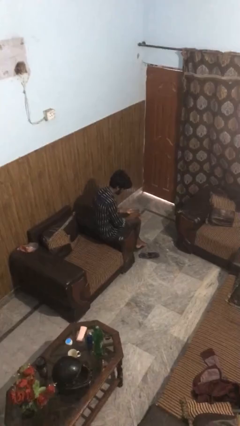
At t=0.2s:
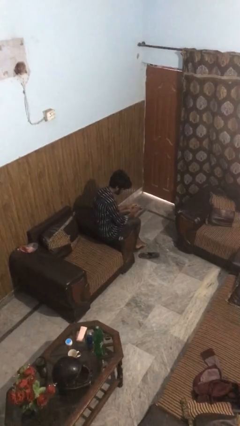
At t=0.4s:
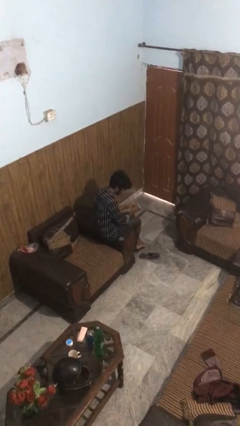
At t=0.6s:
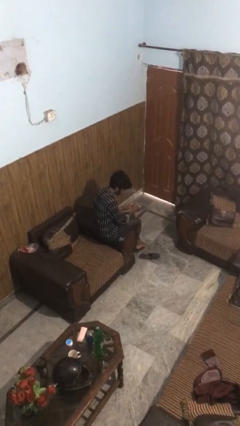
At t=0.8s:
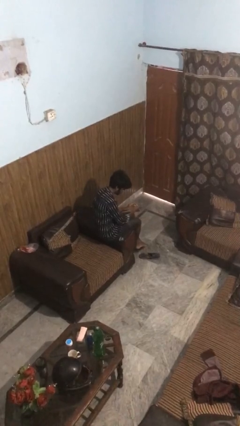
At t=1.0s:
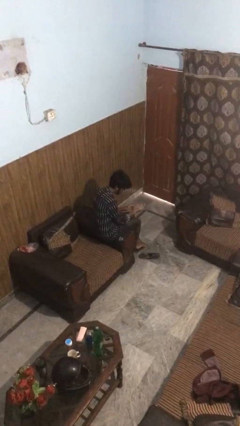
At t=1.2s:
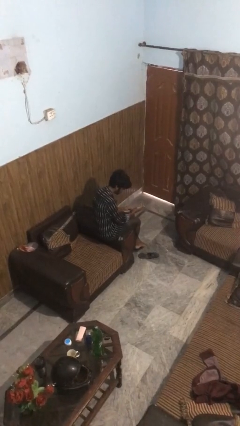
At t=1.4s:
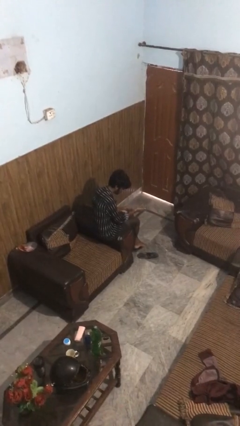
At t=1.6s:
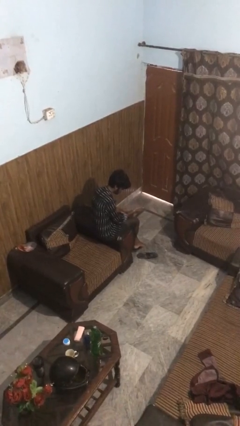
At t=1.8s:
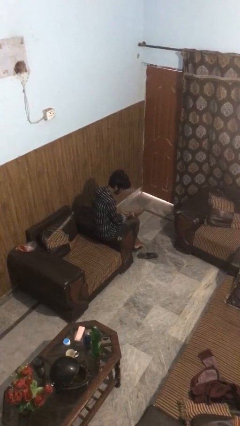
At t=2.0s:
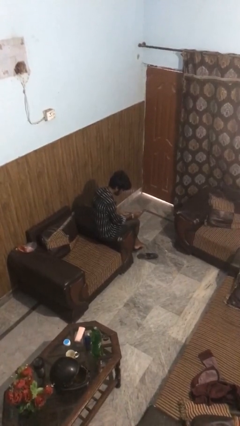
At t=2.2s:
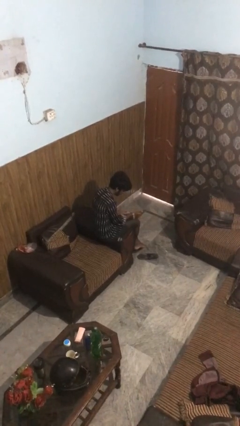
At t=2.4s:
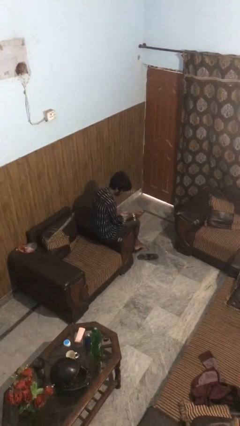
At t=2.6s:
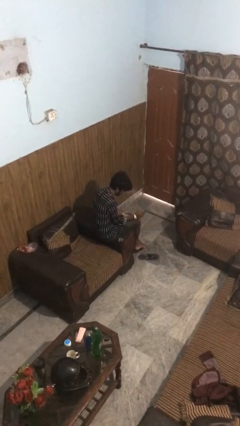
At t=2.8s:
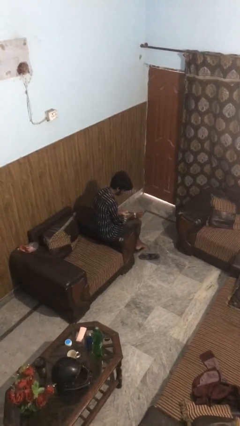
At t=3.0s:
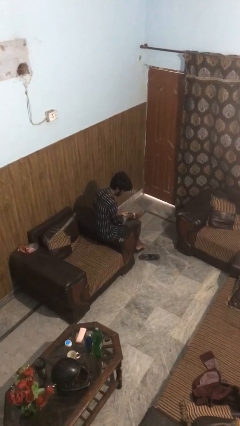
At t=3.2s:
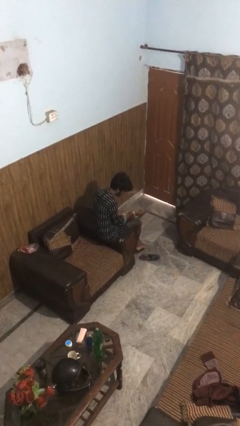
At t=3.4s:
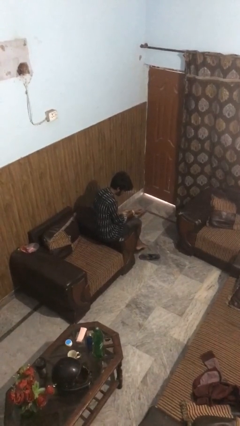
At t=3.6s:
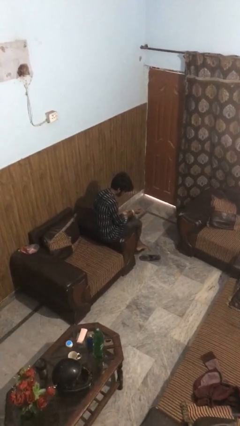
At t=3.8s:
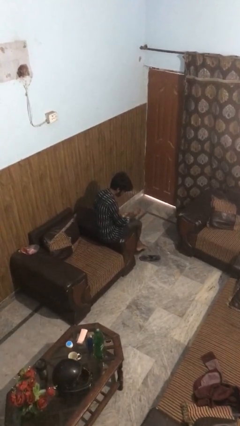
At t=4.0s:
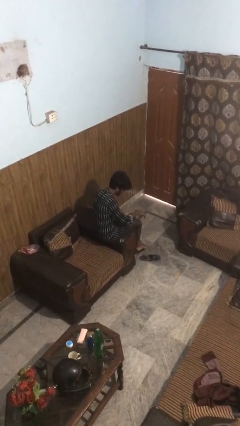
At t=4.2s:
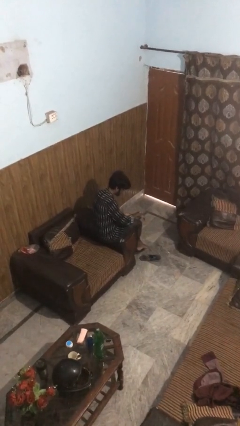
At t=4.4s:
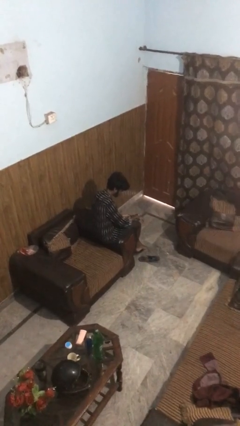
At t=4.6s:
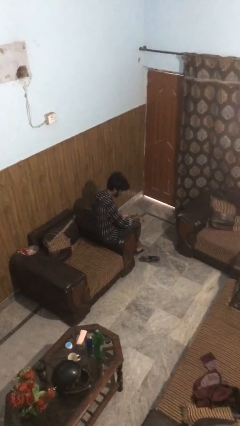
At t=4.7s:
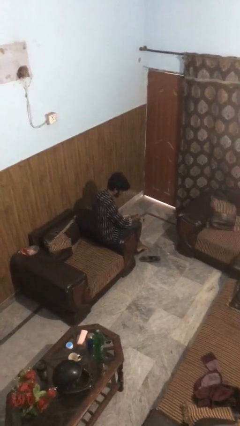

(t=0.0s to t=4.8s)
person puts on wristwatch

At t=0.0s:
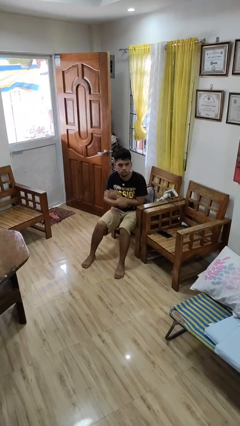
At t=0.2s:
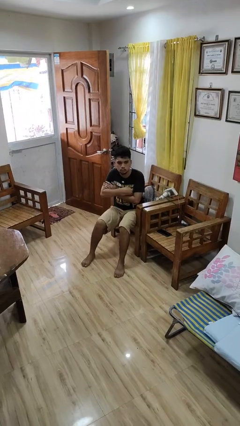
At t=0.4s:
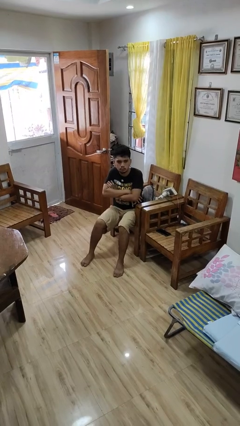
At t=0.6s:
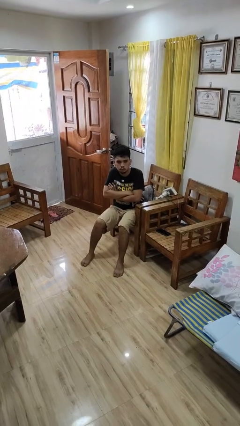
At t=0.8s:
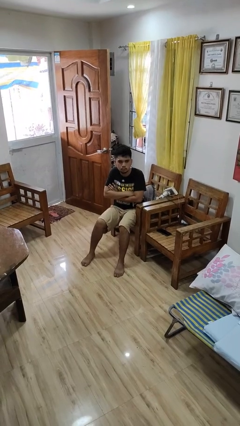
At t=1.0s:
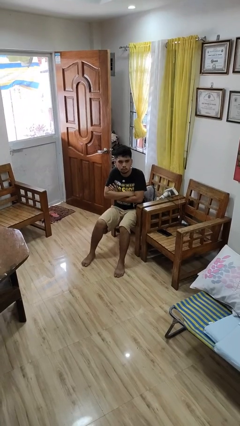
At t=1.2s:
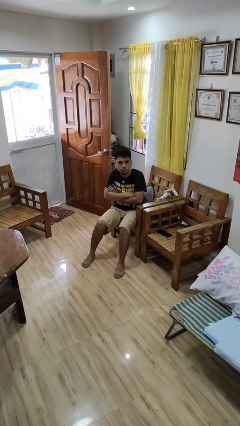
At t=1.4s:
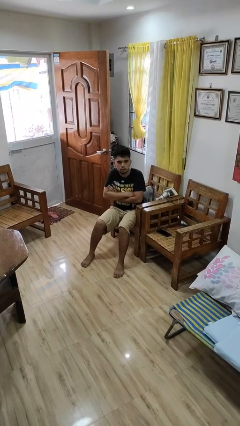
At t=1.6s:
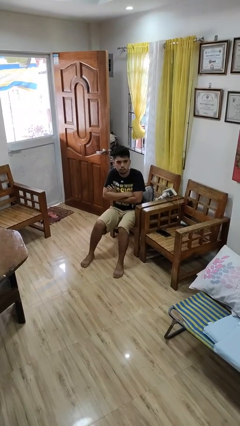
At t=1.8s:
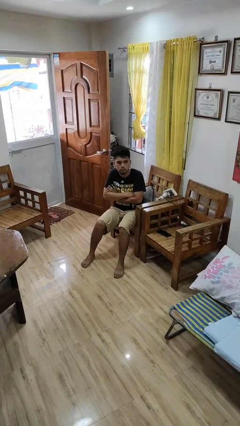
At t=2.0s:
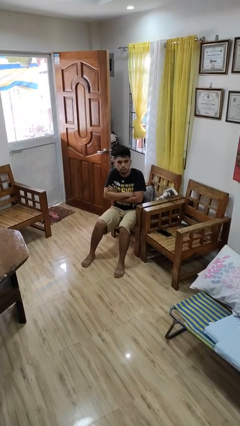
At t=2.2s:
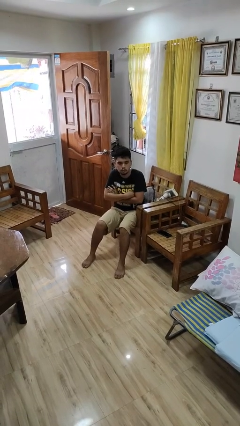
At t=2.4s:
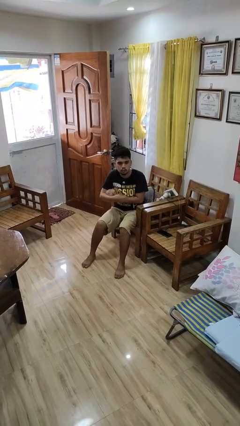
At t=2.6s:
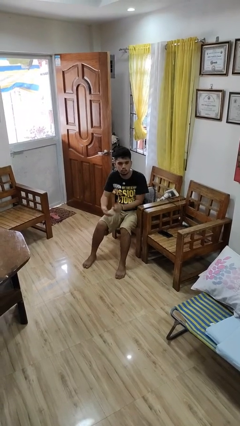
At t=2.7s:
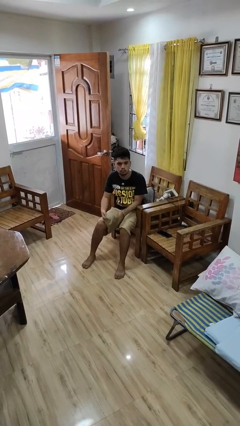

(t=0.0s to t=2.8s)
person crosses arms

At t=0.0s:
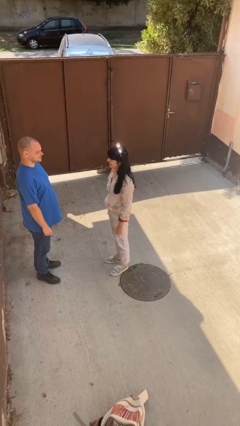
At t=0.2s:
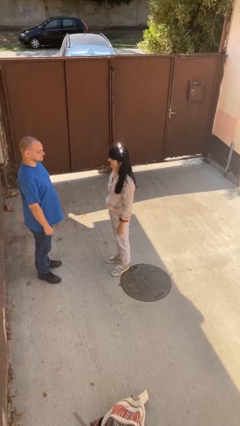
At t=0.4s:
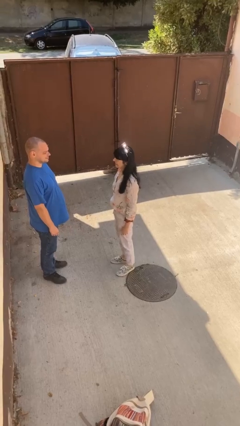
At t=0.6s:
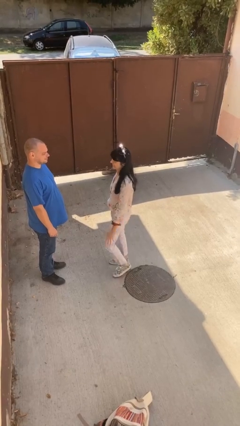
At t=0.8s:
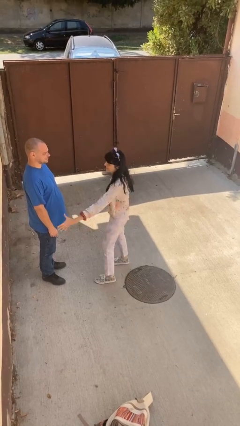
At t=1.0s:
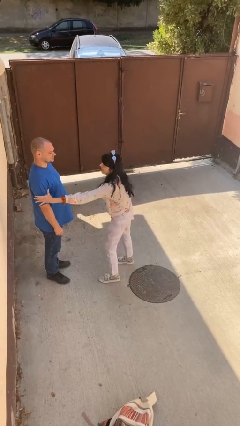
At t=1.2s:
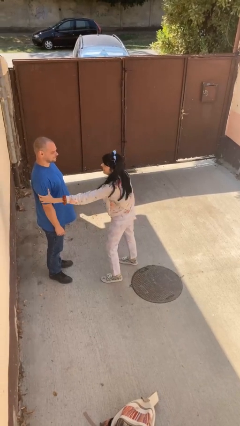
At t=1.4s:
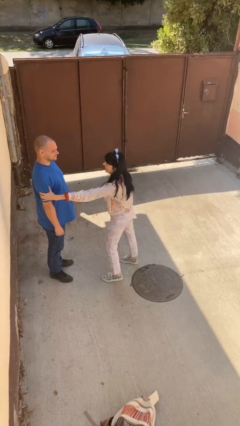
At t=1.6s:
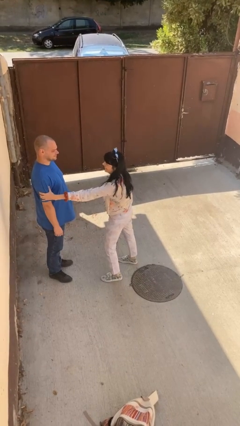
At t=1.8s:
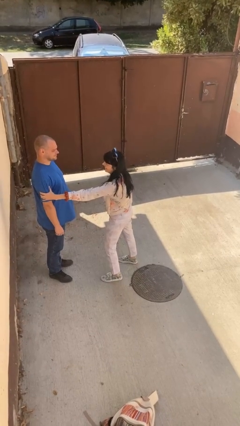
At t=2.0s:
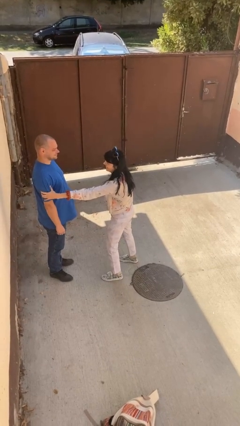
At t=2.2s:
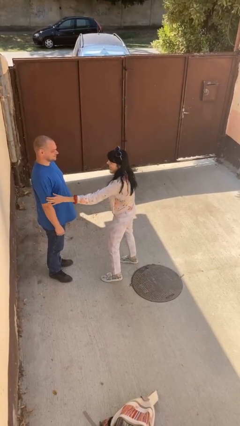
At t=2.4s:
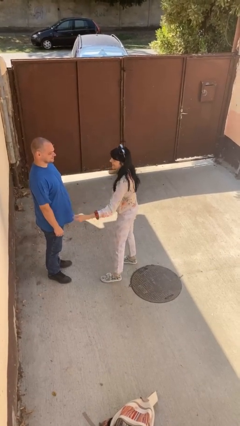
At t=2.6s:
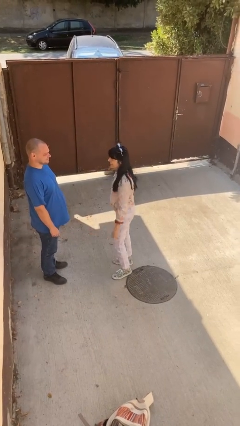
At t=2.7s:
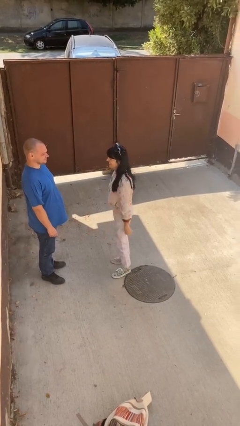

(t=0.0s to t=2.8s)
person grabs person by bicep

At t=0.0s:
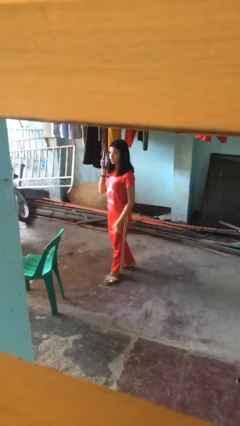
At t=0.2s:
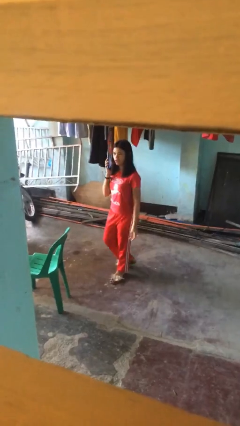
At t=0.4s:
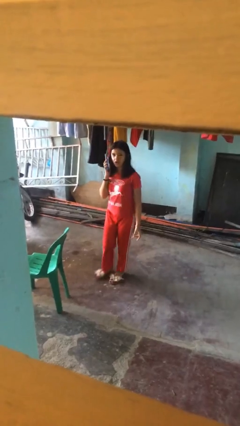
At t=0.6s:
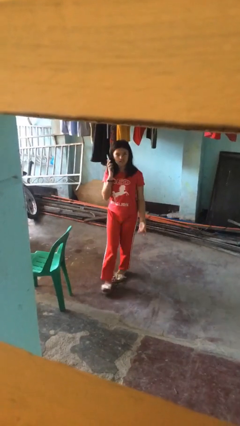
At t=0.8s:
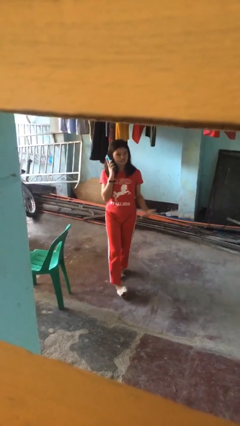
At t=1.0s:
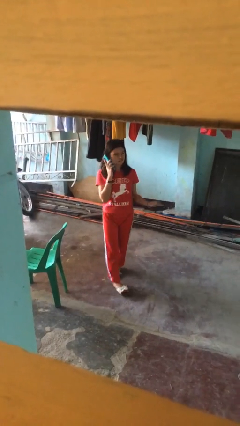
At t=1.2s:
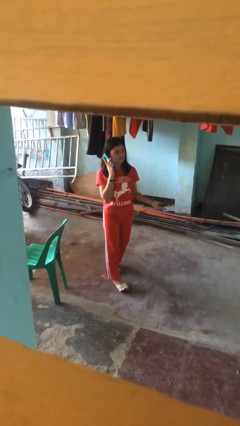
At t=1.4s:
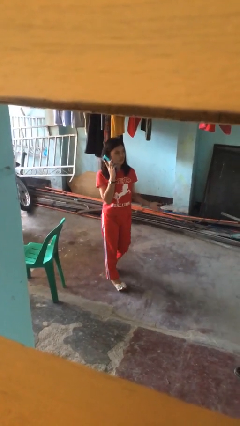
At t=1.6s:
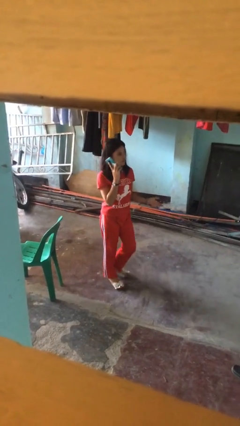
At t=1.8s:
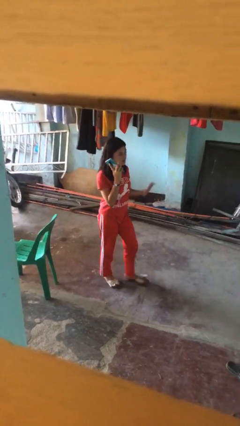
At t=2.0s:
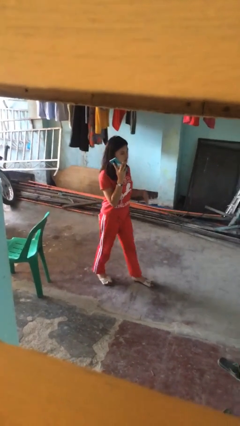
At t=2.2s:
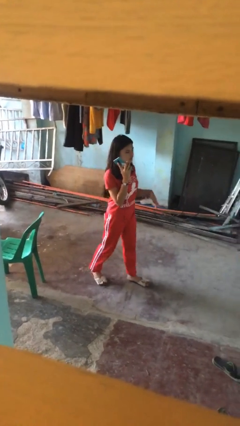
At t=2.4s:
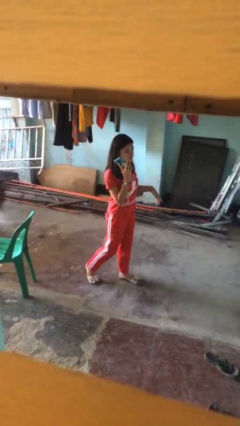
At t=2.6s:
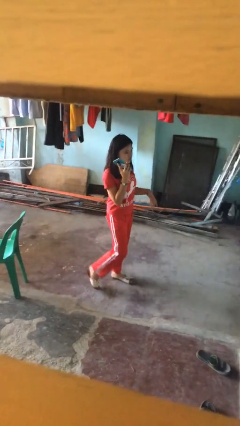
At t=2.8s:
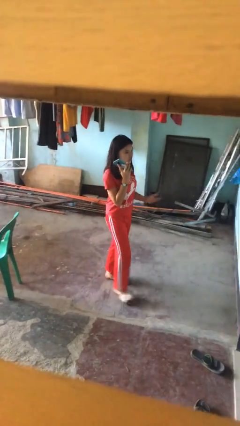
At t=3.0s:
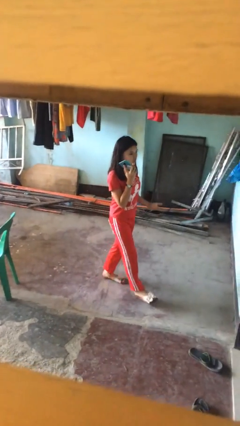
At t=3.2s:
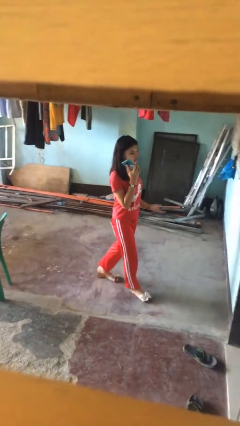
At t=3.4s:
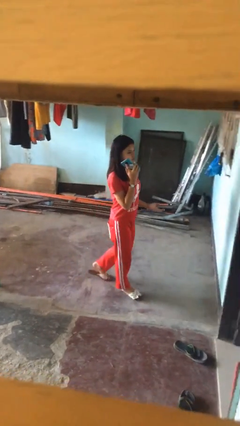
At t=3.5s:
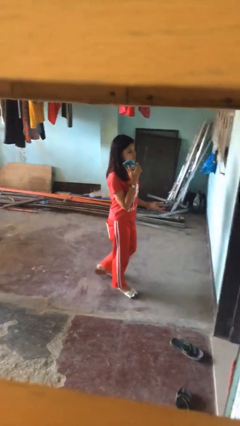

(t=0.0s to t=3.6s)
person talks on phone

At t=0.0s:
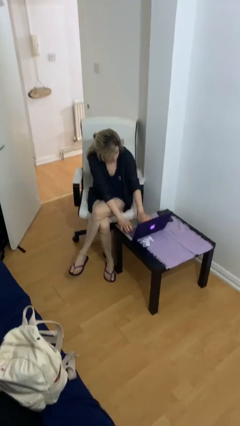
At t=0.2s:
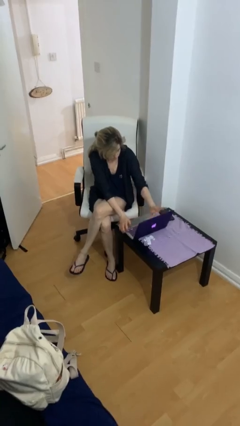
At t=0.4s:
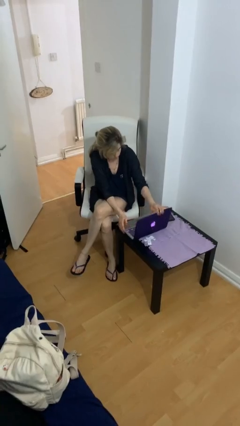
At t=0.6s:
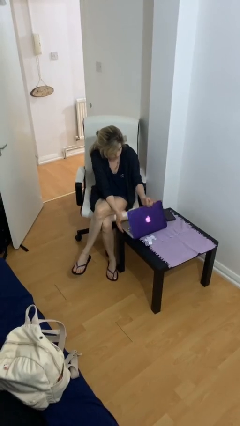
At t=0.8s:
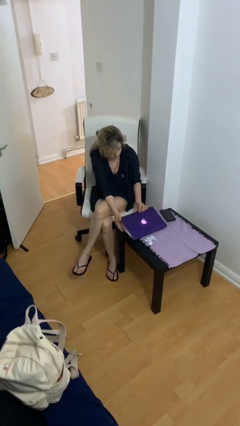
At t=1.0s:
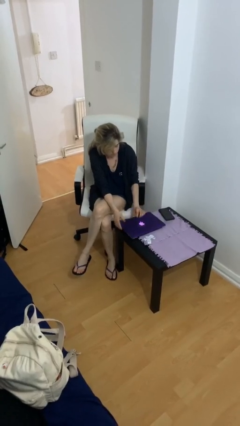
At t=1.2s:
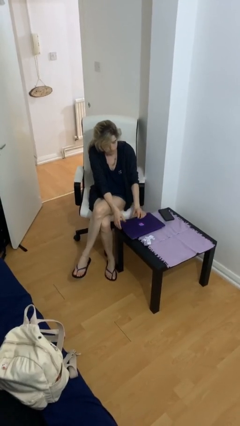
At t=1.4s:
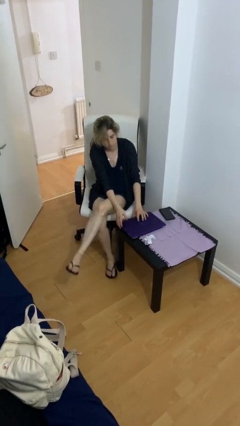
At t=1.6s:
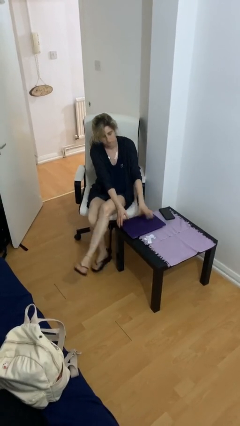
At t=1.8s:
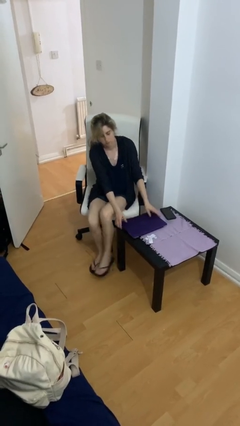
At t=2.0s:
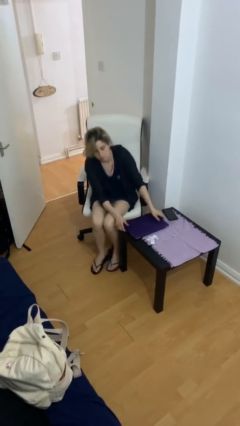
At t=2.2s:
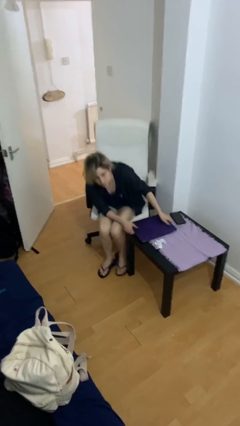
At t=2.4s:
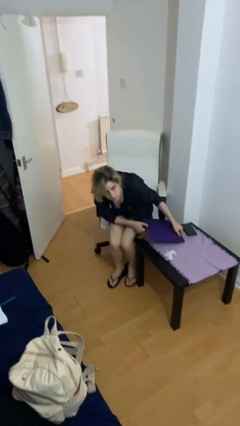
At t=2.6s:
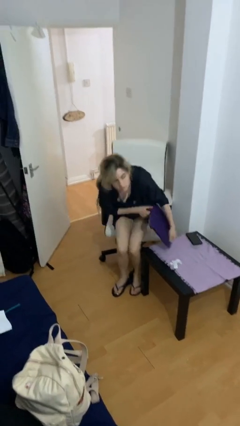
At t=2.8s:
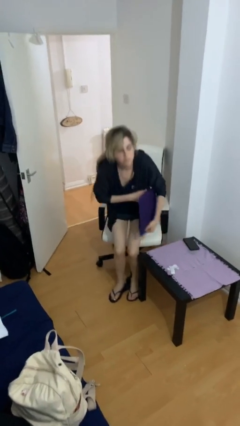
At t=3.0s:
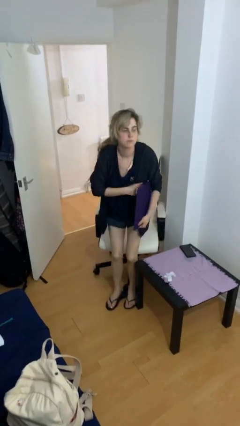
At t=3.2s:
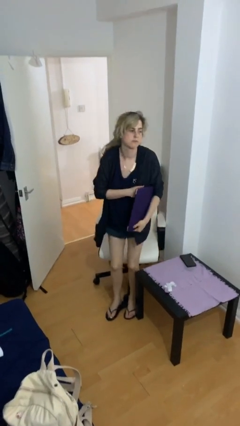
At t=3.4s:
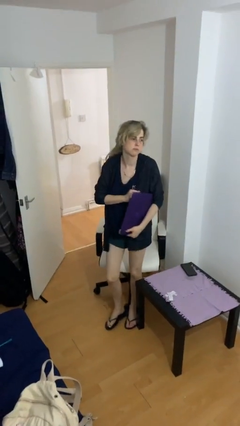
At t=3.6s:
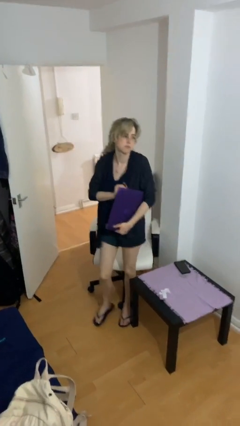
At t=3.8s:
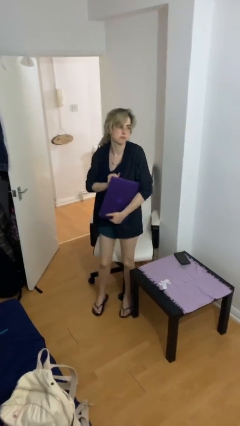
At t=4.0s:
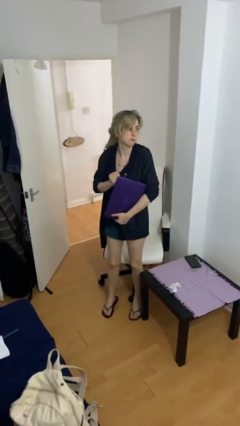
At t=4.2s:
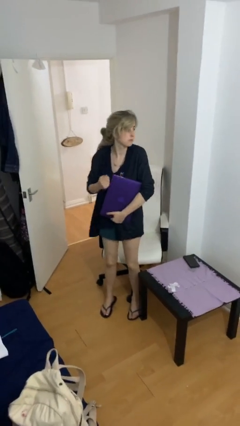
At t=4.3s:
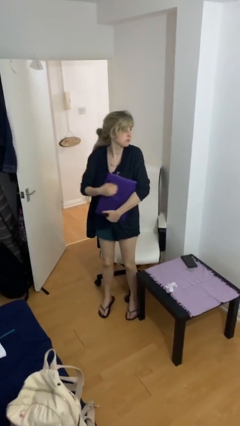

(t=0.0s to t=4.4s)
person stands up
